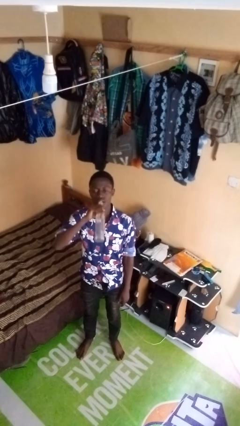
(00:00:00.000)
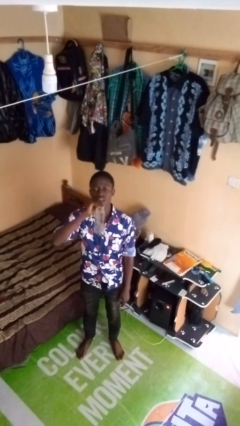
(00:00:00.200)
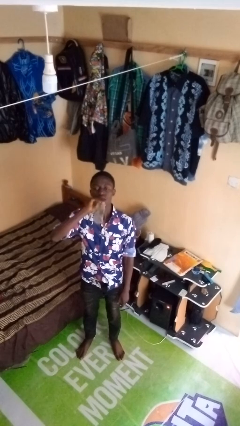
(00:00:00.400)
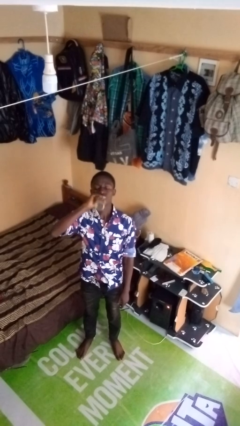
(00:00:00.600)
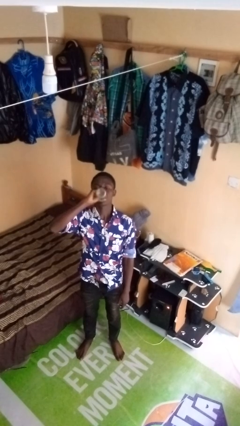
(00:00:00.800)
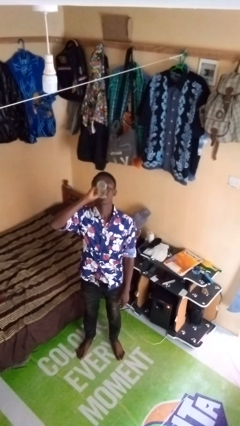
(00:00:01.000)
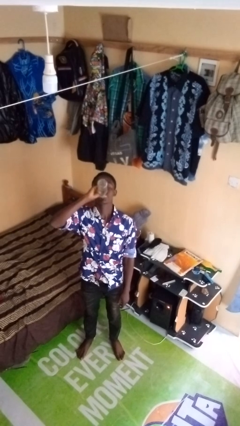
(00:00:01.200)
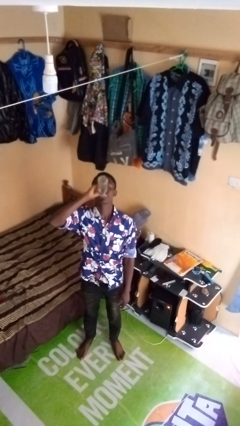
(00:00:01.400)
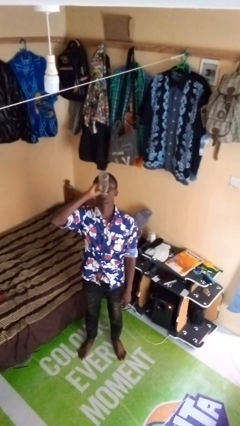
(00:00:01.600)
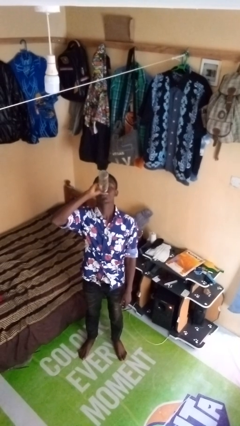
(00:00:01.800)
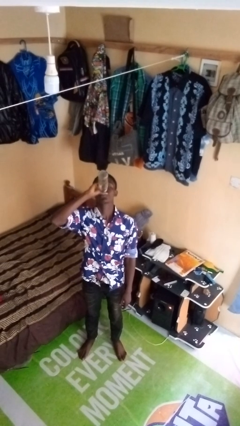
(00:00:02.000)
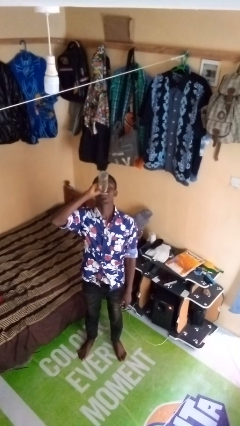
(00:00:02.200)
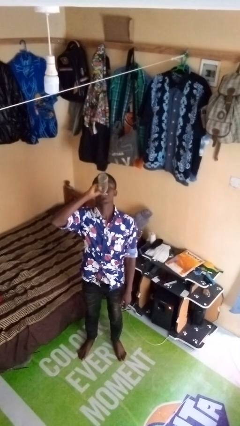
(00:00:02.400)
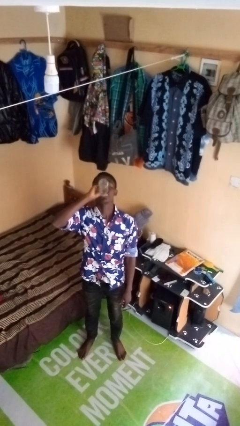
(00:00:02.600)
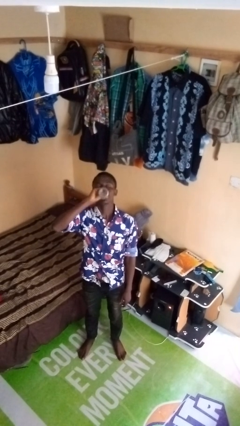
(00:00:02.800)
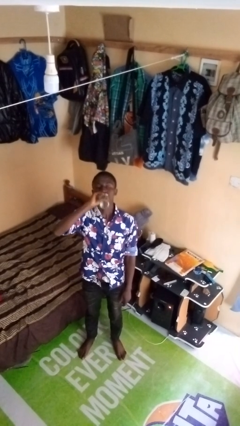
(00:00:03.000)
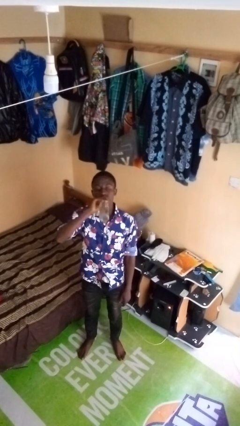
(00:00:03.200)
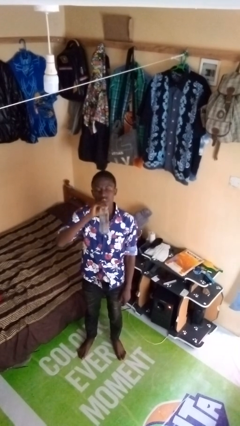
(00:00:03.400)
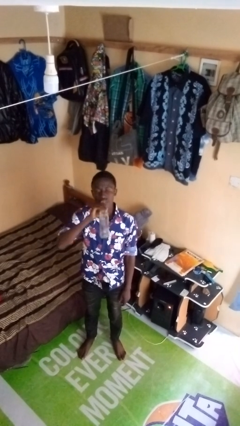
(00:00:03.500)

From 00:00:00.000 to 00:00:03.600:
person drinks from bottle

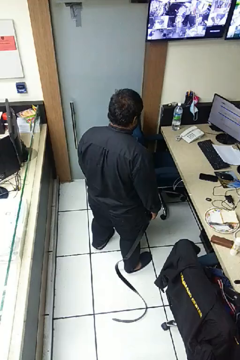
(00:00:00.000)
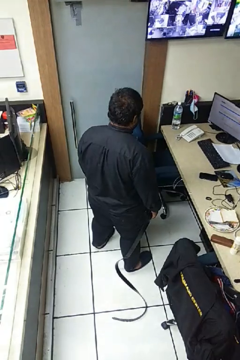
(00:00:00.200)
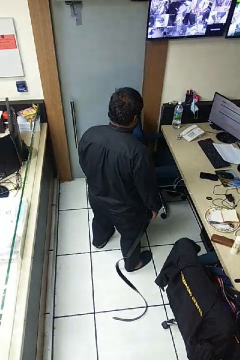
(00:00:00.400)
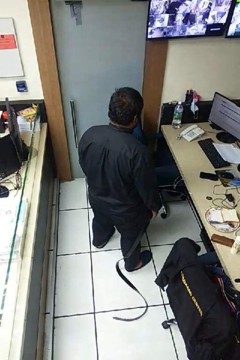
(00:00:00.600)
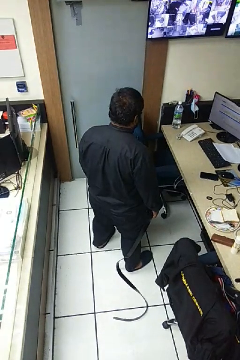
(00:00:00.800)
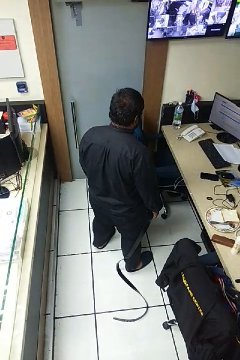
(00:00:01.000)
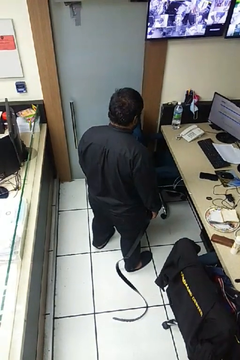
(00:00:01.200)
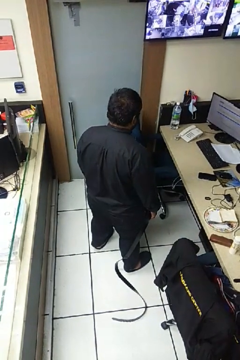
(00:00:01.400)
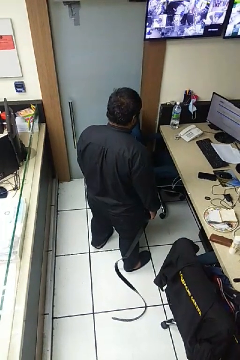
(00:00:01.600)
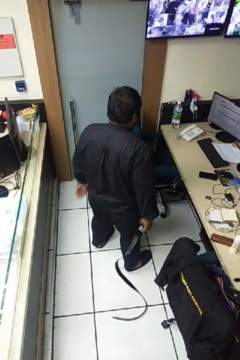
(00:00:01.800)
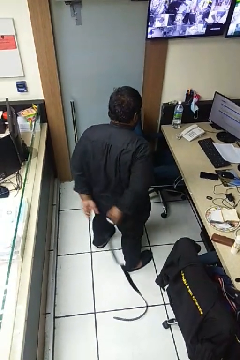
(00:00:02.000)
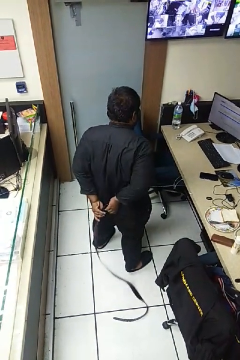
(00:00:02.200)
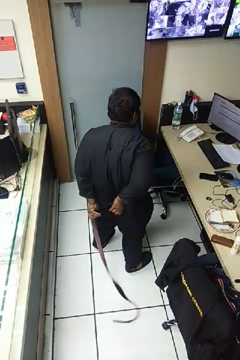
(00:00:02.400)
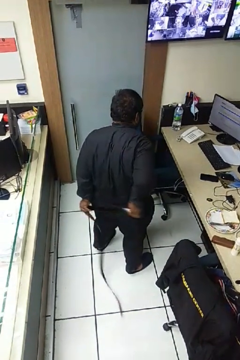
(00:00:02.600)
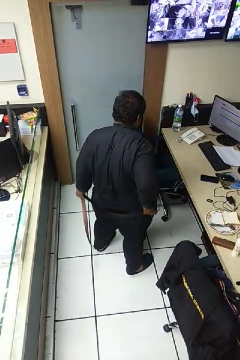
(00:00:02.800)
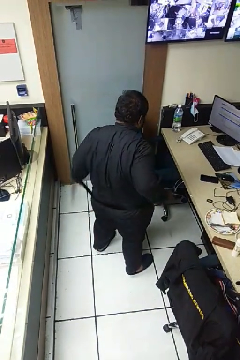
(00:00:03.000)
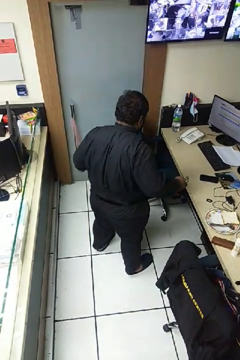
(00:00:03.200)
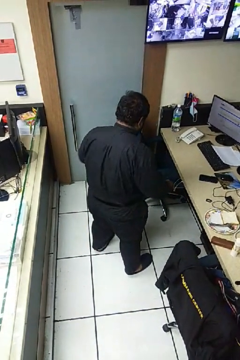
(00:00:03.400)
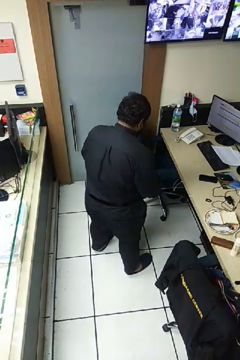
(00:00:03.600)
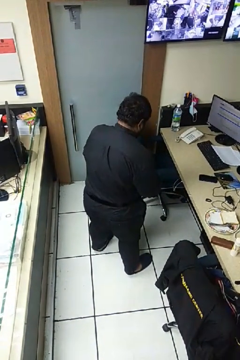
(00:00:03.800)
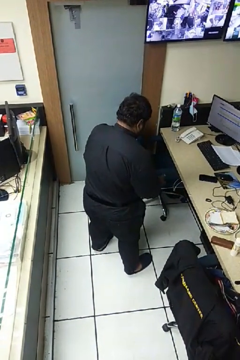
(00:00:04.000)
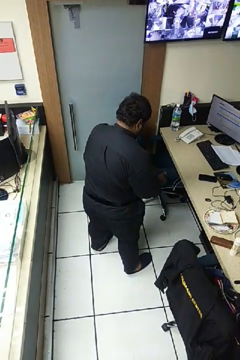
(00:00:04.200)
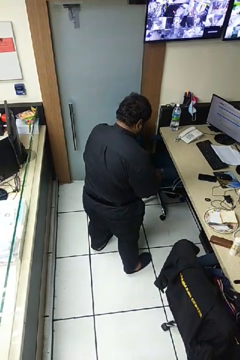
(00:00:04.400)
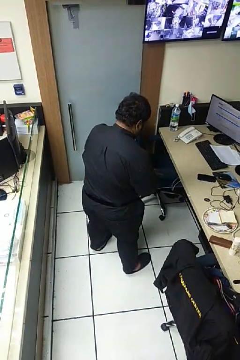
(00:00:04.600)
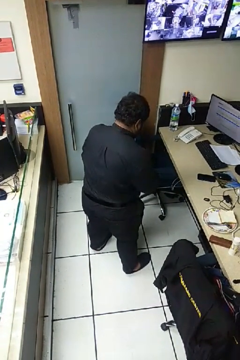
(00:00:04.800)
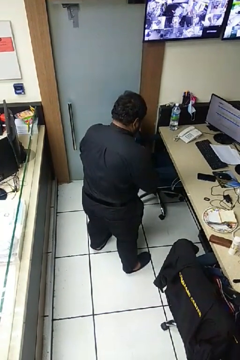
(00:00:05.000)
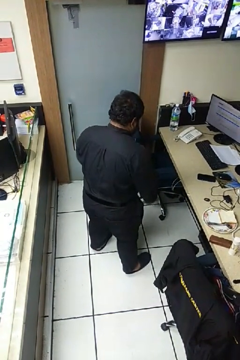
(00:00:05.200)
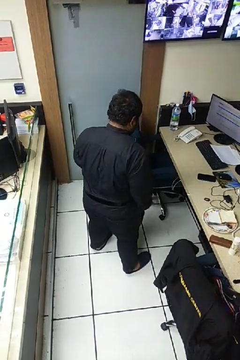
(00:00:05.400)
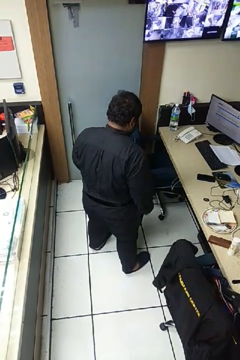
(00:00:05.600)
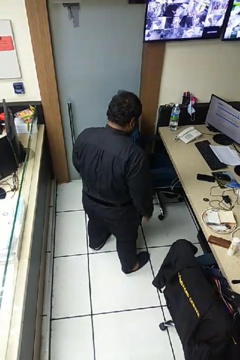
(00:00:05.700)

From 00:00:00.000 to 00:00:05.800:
person puts on belt

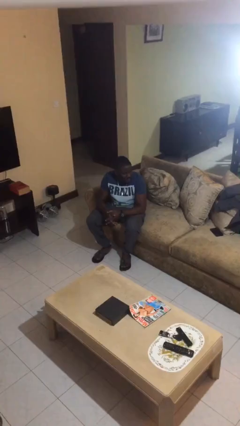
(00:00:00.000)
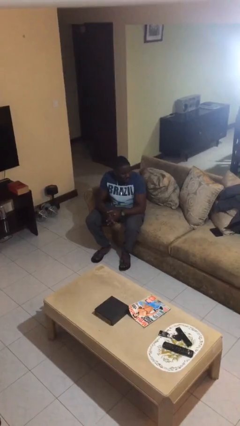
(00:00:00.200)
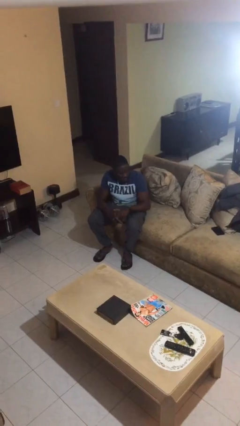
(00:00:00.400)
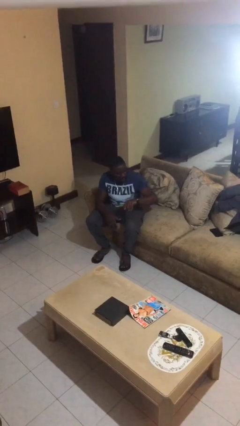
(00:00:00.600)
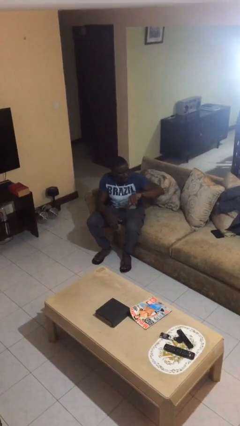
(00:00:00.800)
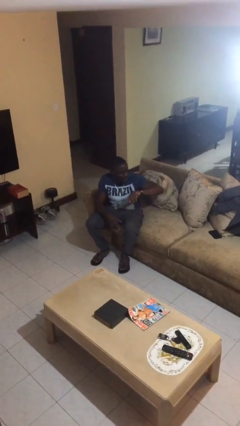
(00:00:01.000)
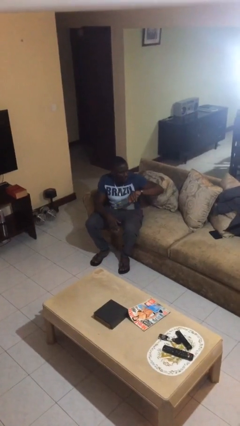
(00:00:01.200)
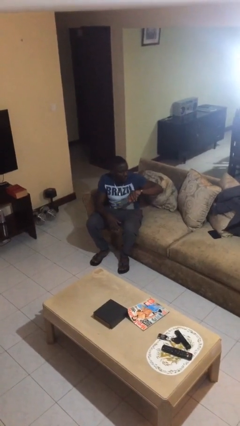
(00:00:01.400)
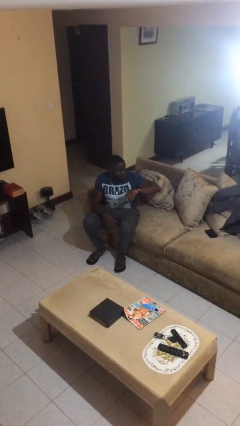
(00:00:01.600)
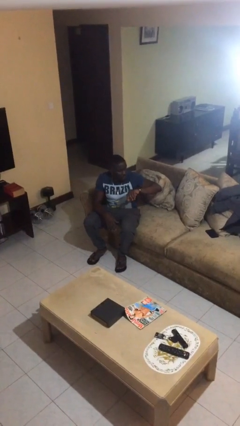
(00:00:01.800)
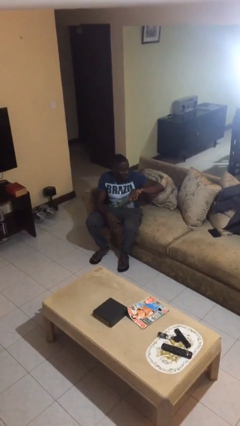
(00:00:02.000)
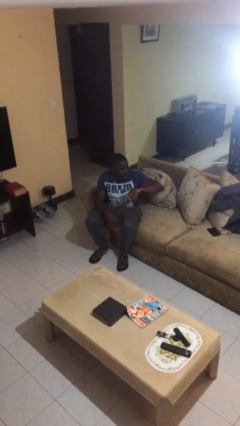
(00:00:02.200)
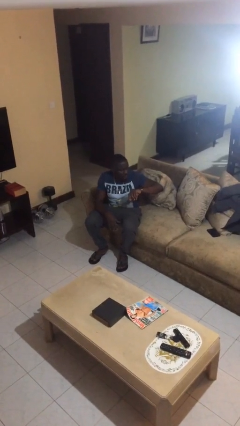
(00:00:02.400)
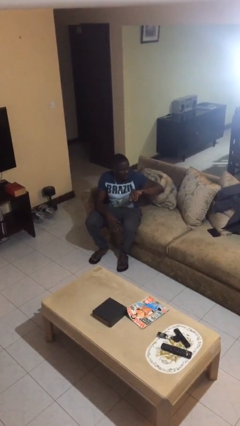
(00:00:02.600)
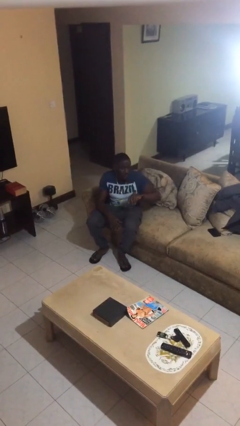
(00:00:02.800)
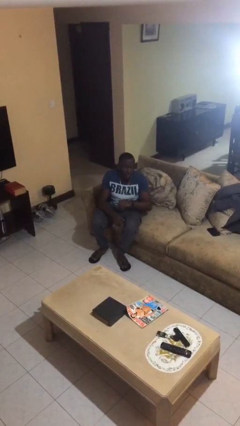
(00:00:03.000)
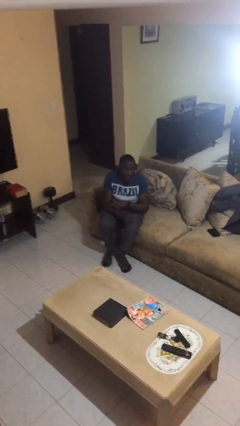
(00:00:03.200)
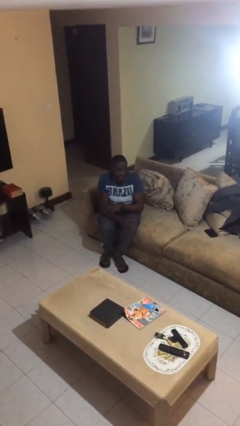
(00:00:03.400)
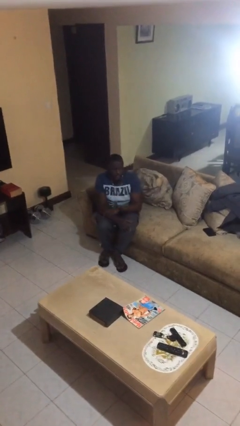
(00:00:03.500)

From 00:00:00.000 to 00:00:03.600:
person looks at wristwatch

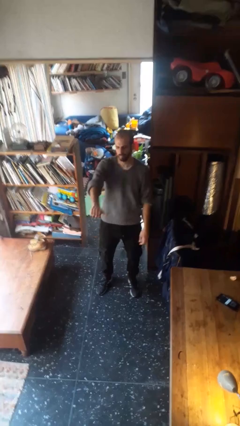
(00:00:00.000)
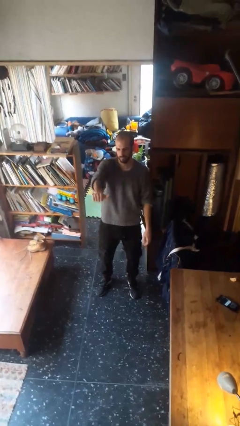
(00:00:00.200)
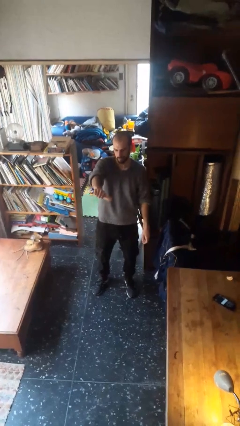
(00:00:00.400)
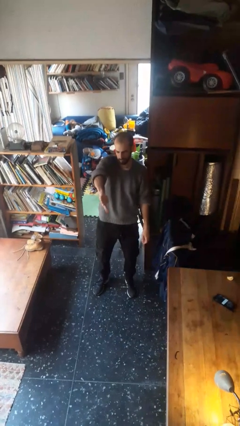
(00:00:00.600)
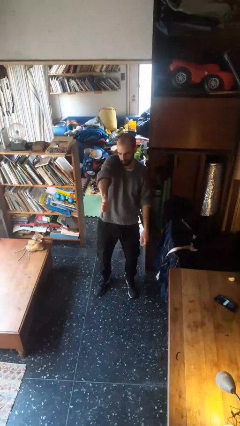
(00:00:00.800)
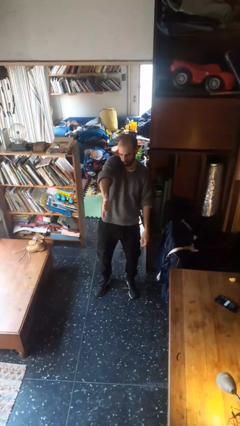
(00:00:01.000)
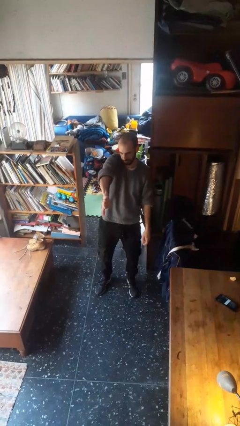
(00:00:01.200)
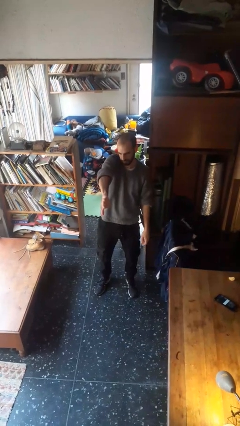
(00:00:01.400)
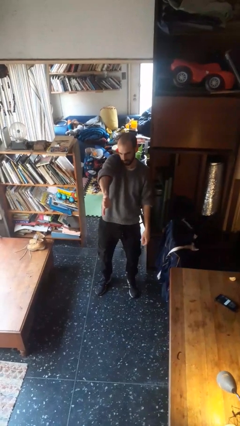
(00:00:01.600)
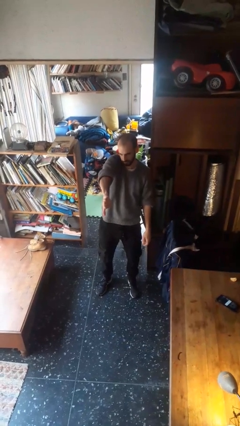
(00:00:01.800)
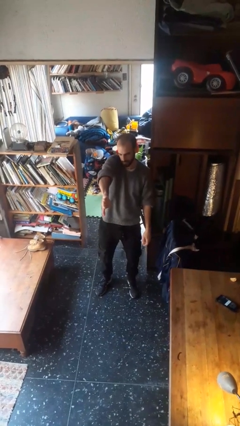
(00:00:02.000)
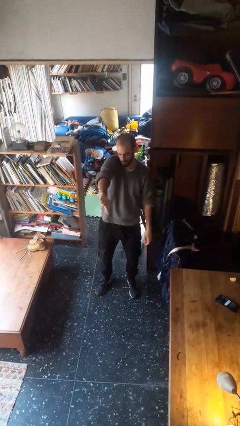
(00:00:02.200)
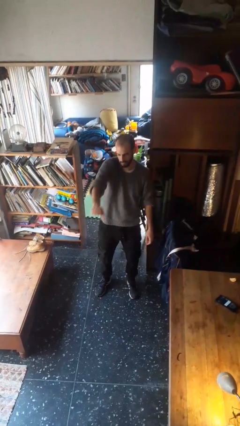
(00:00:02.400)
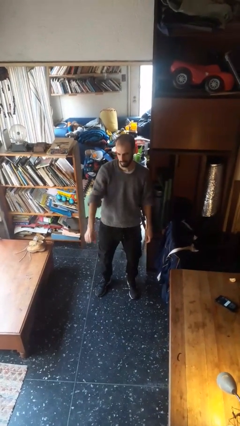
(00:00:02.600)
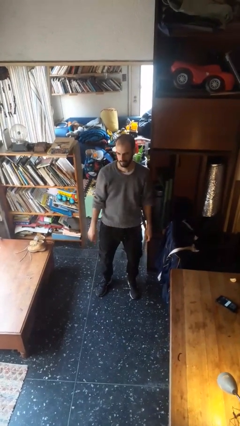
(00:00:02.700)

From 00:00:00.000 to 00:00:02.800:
person gestures thumbs down

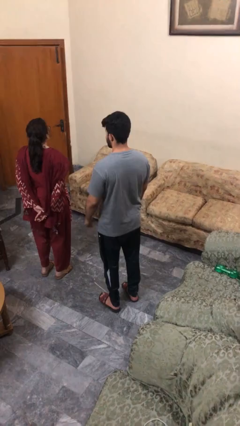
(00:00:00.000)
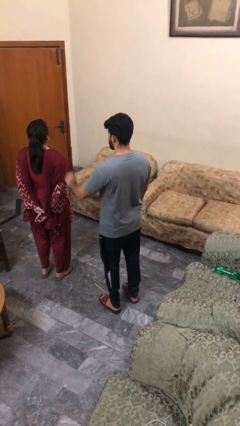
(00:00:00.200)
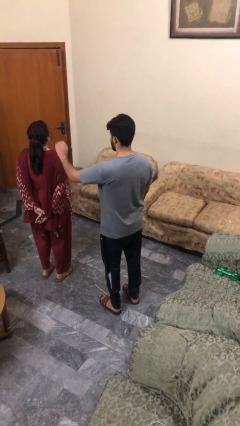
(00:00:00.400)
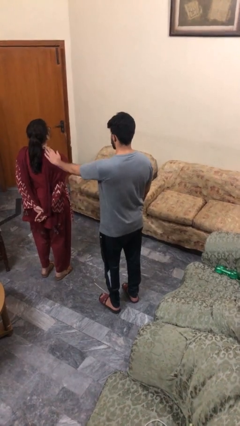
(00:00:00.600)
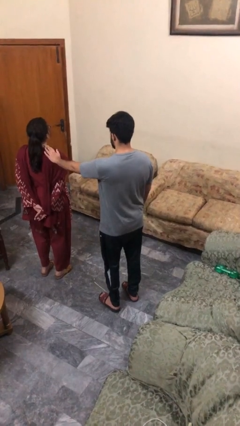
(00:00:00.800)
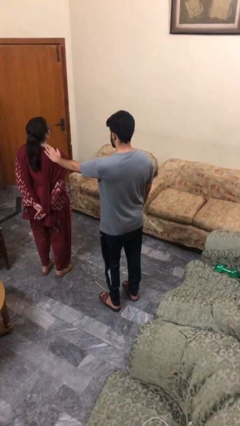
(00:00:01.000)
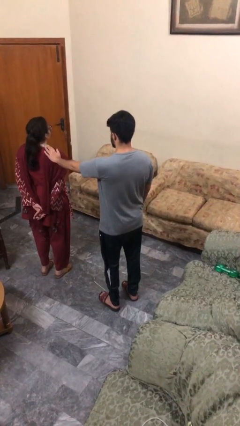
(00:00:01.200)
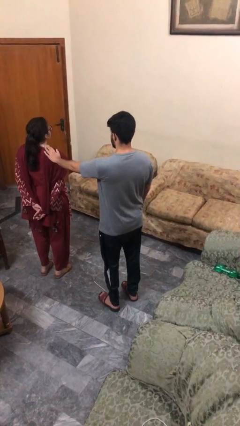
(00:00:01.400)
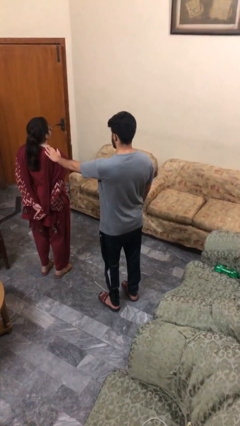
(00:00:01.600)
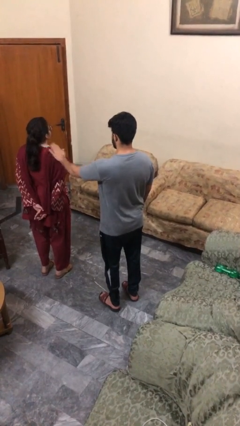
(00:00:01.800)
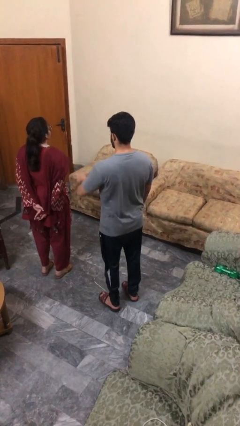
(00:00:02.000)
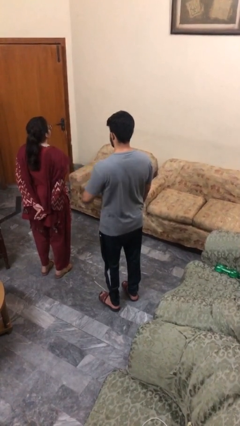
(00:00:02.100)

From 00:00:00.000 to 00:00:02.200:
person pounds shoulders of person
